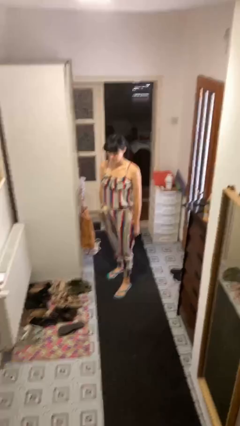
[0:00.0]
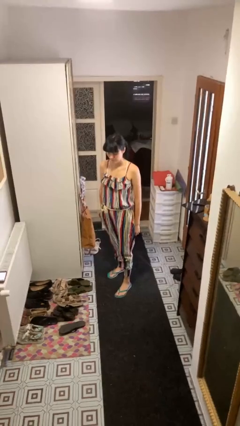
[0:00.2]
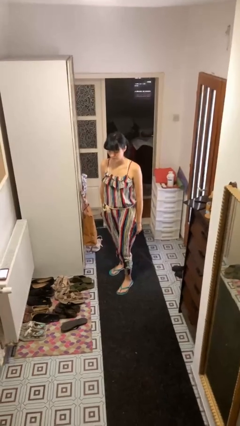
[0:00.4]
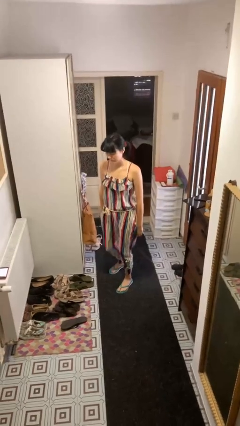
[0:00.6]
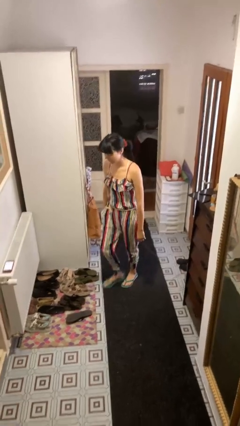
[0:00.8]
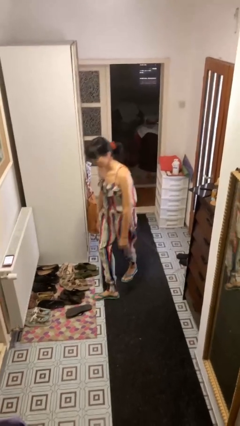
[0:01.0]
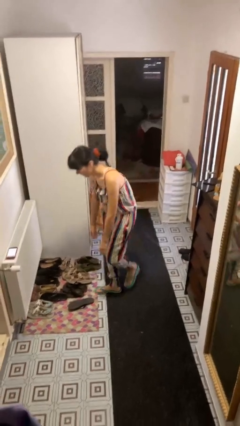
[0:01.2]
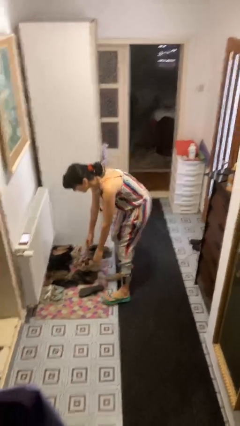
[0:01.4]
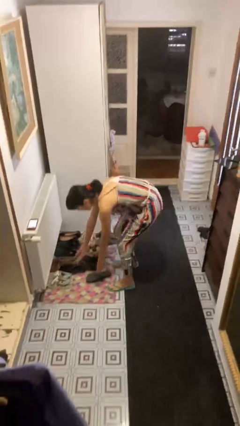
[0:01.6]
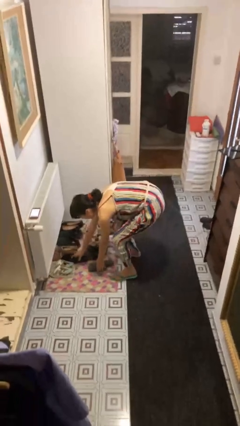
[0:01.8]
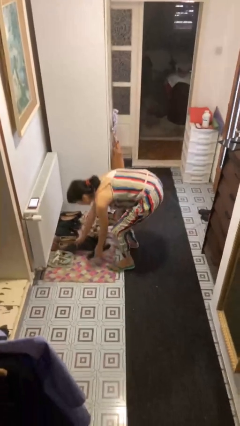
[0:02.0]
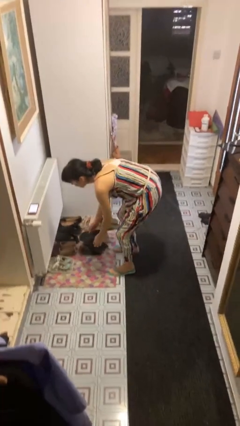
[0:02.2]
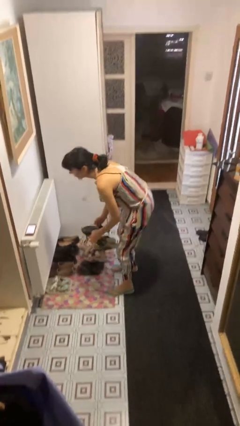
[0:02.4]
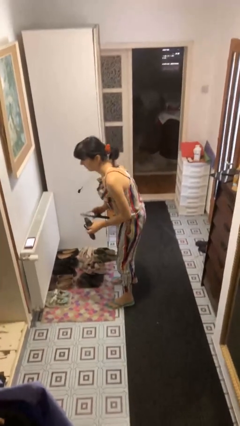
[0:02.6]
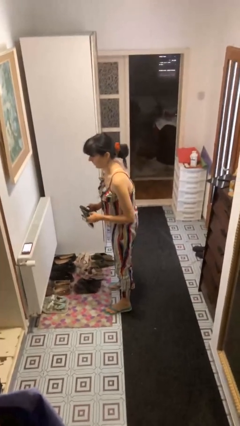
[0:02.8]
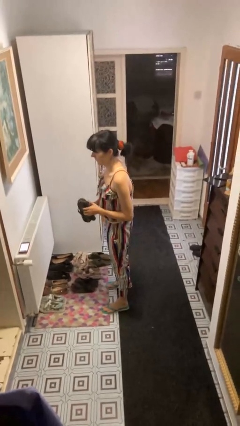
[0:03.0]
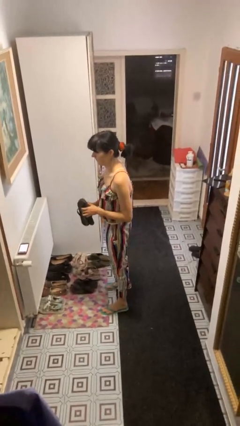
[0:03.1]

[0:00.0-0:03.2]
person picks up object from floor

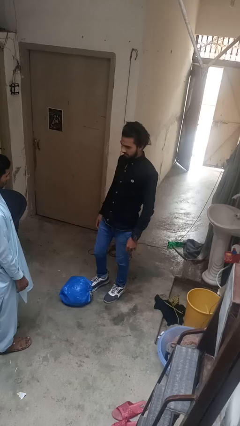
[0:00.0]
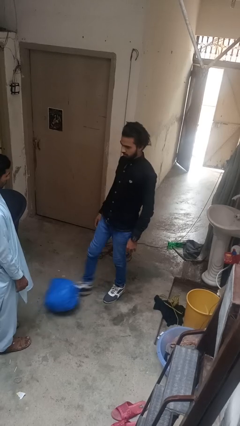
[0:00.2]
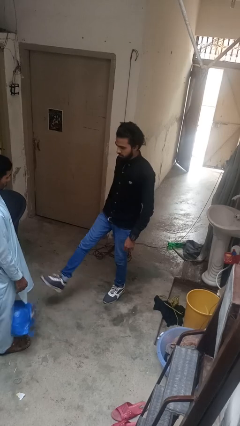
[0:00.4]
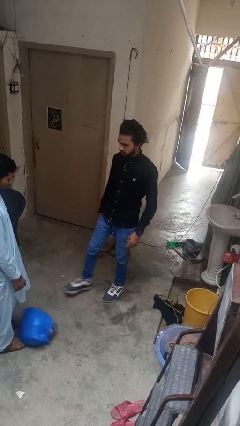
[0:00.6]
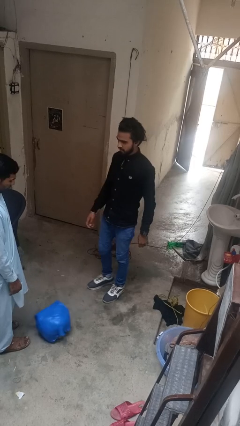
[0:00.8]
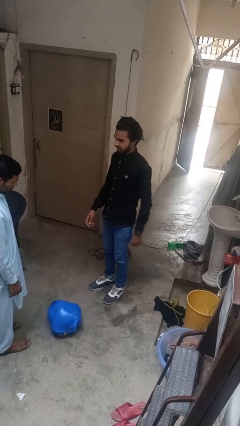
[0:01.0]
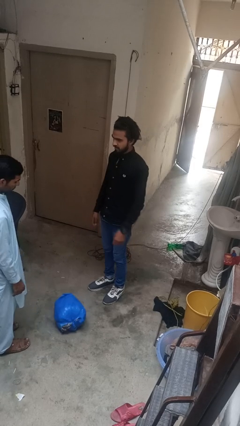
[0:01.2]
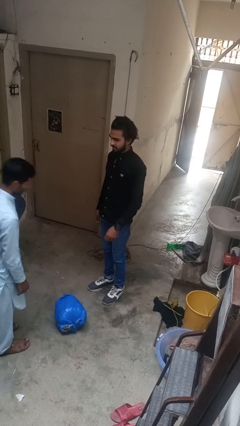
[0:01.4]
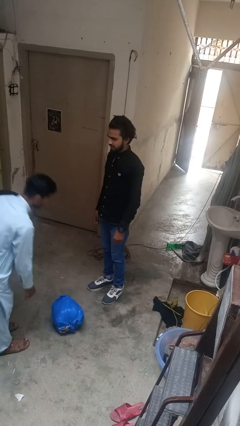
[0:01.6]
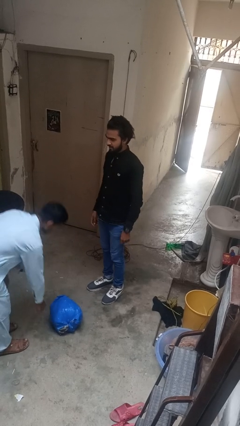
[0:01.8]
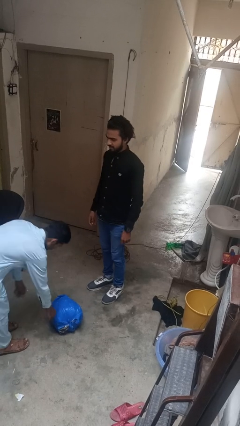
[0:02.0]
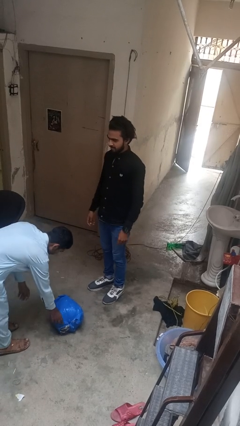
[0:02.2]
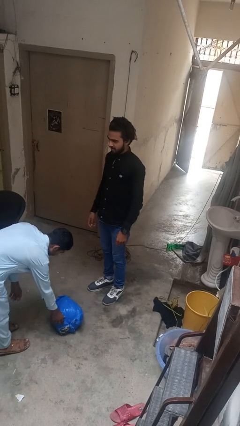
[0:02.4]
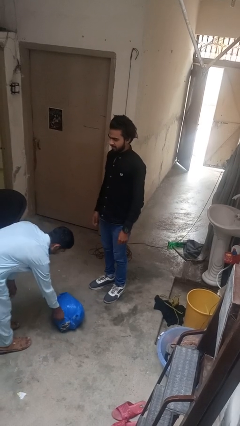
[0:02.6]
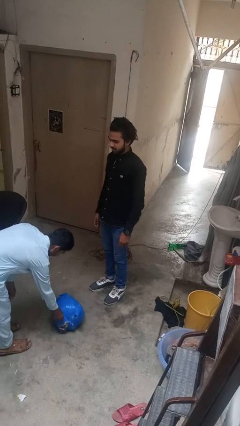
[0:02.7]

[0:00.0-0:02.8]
person kicks object to person

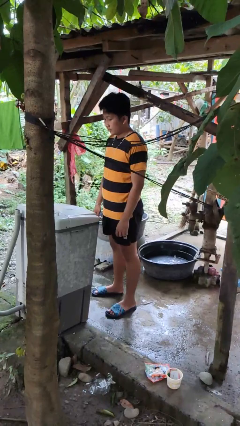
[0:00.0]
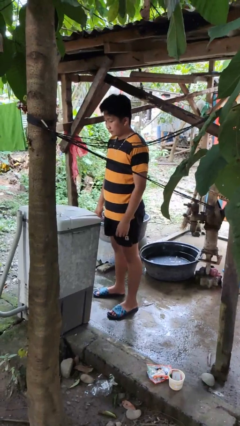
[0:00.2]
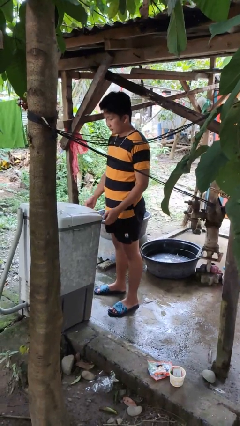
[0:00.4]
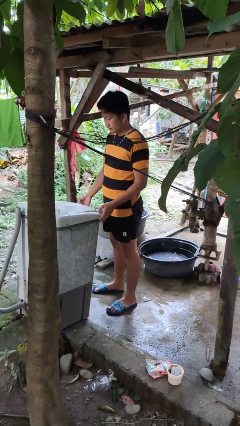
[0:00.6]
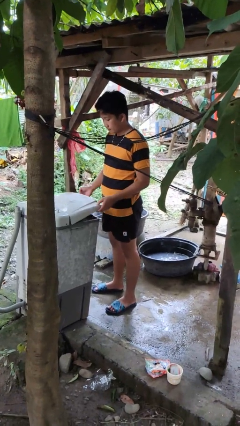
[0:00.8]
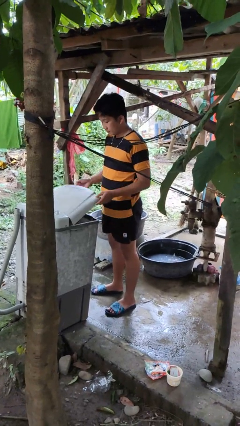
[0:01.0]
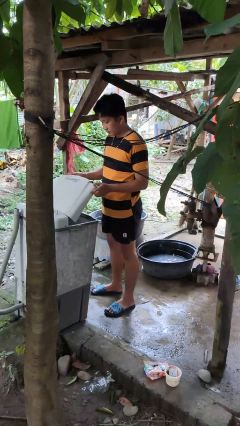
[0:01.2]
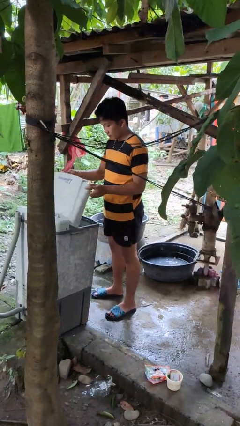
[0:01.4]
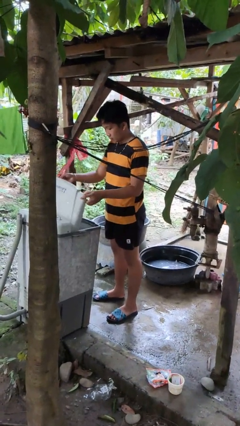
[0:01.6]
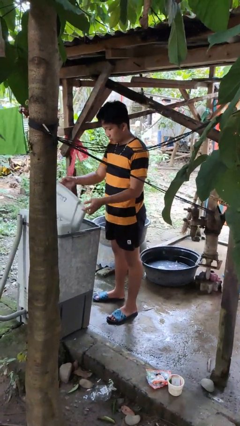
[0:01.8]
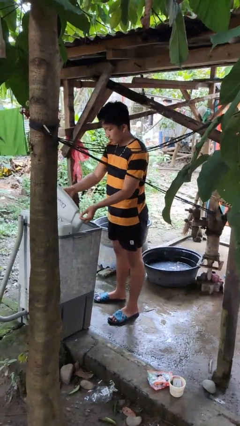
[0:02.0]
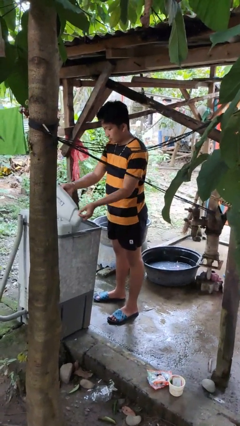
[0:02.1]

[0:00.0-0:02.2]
person opens clothes washer

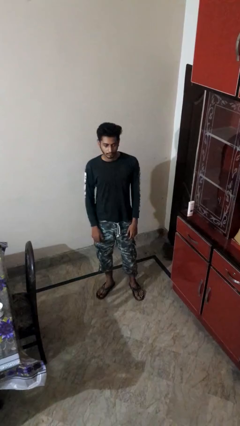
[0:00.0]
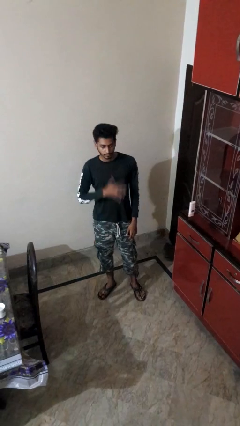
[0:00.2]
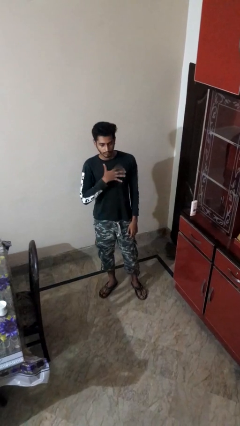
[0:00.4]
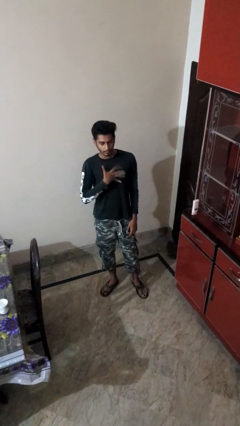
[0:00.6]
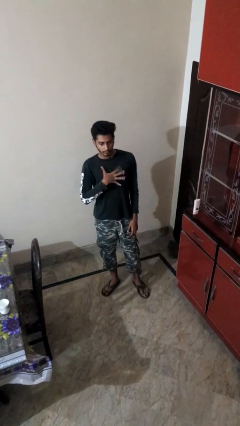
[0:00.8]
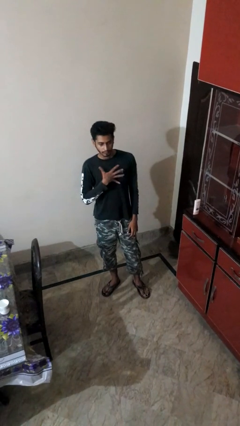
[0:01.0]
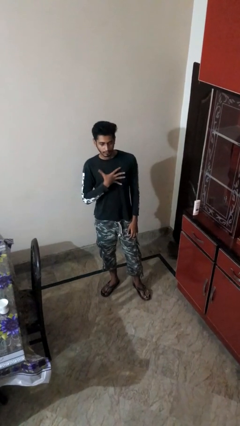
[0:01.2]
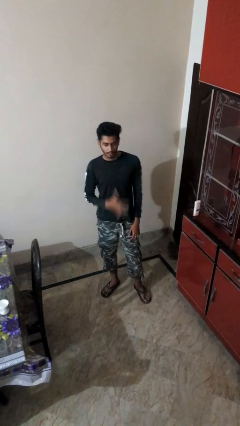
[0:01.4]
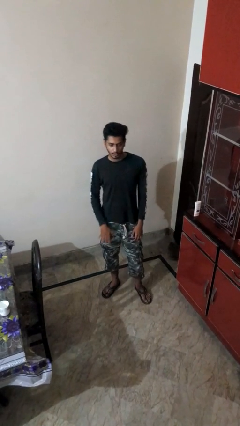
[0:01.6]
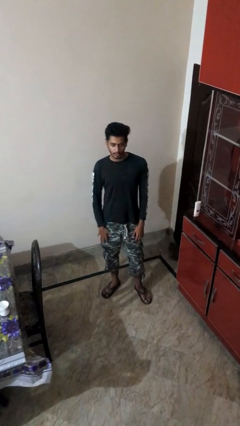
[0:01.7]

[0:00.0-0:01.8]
person drums on chest

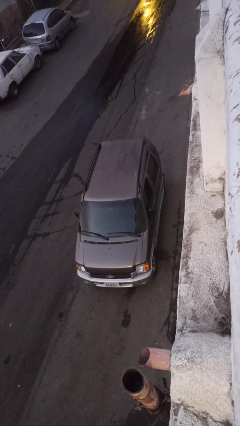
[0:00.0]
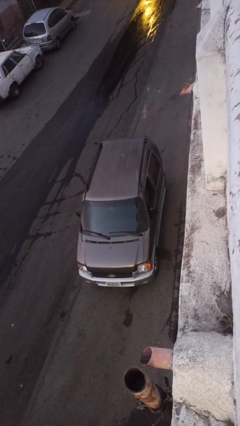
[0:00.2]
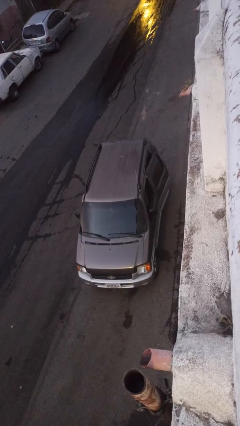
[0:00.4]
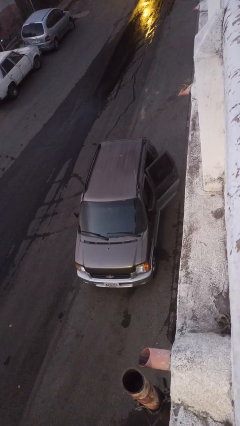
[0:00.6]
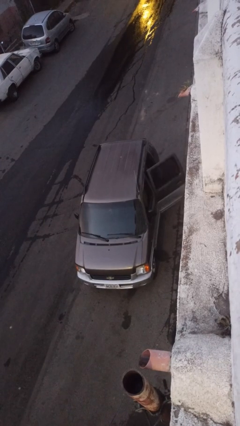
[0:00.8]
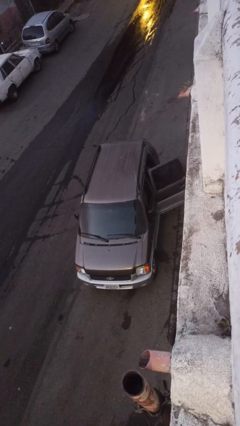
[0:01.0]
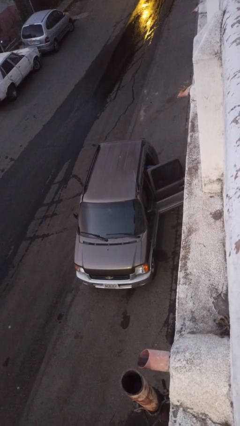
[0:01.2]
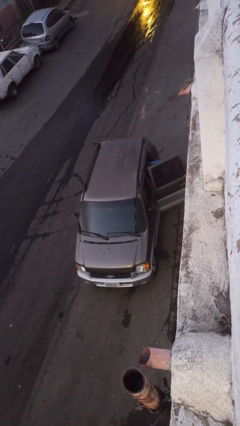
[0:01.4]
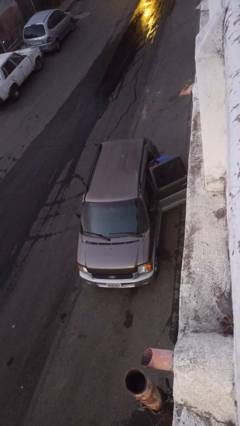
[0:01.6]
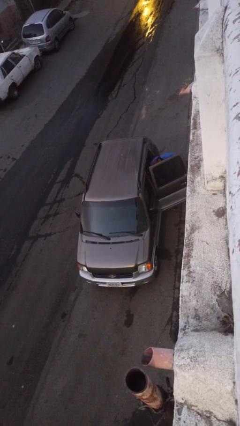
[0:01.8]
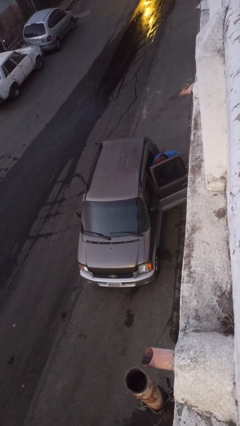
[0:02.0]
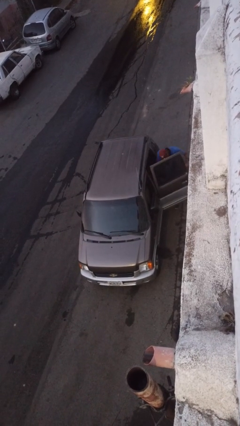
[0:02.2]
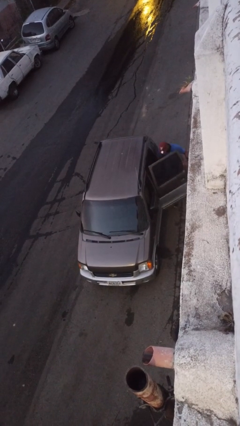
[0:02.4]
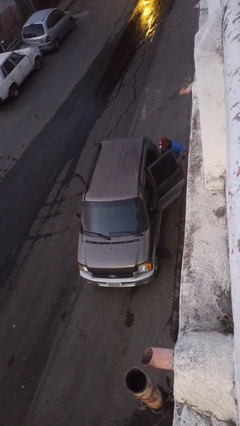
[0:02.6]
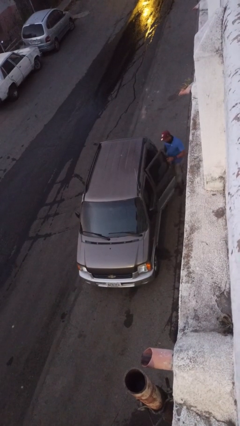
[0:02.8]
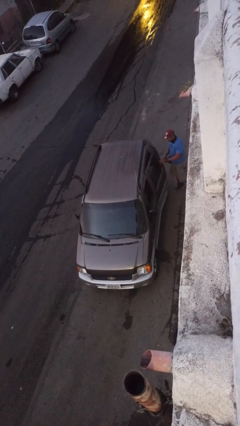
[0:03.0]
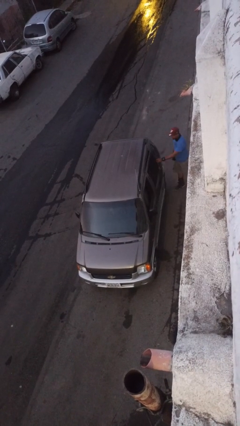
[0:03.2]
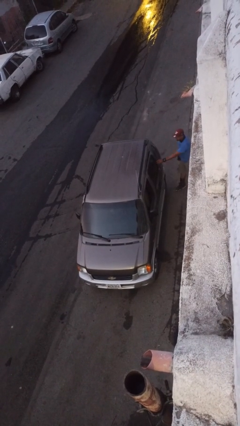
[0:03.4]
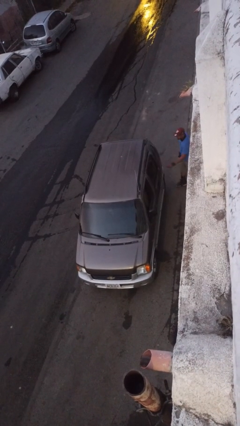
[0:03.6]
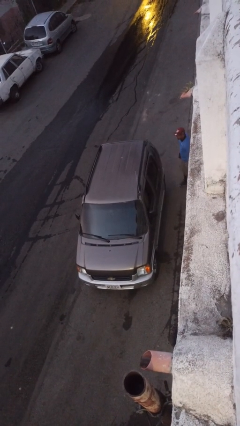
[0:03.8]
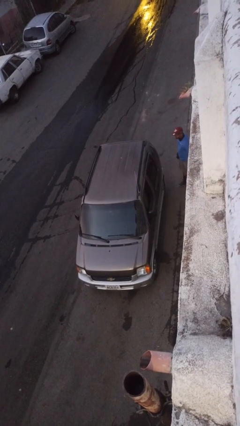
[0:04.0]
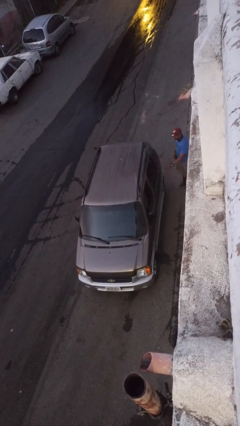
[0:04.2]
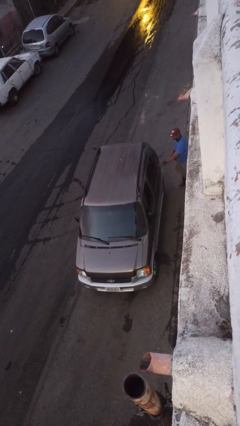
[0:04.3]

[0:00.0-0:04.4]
car drops off person

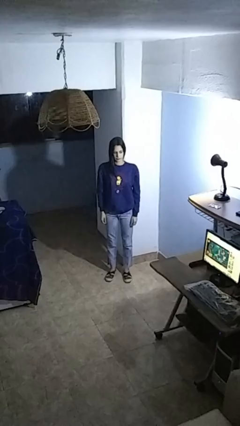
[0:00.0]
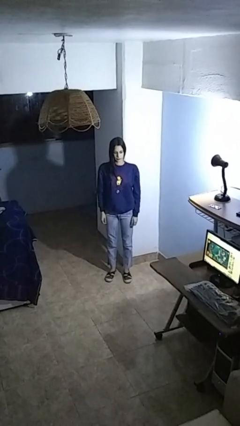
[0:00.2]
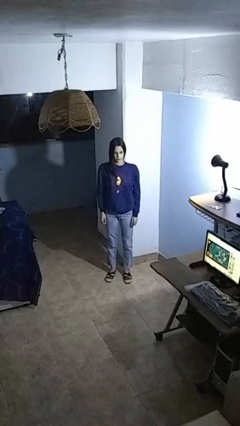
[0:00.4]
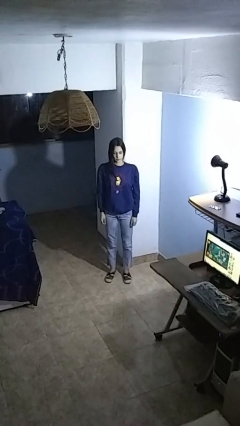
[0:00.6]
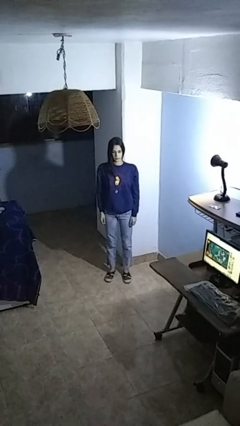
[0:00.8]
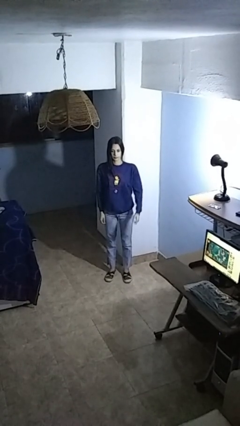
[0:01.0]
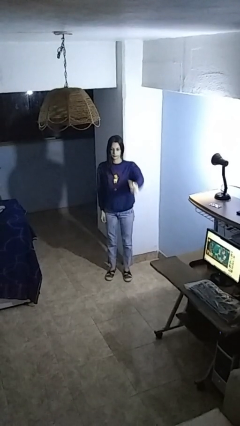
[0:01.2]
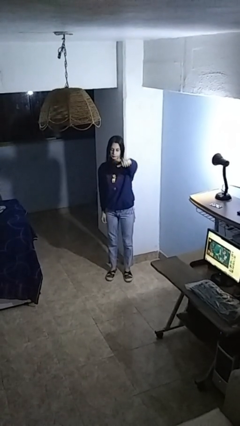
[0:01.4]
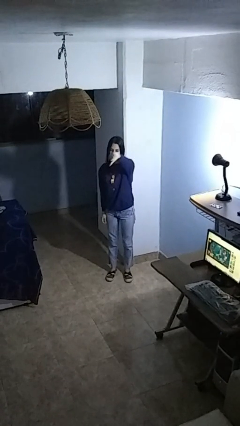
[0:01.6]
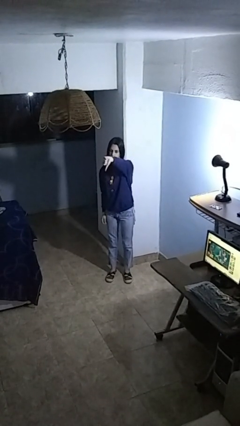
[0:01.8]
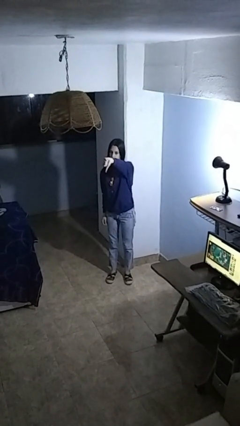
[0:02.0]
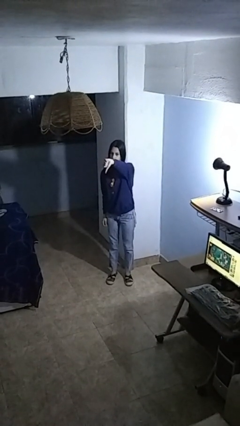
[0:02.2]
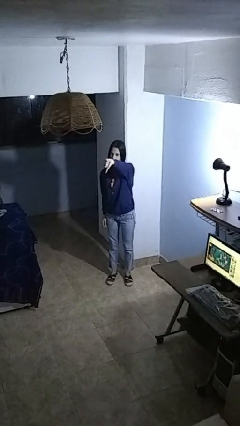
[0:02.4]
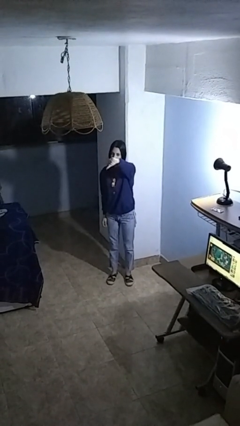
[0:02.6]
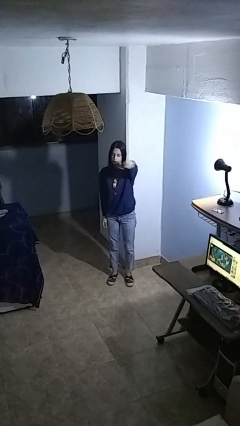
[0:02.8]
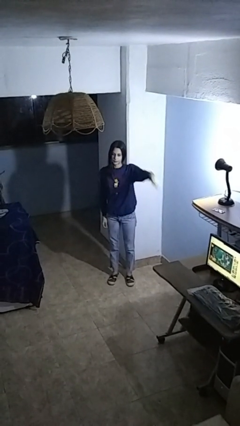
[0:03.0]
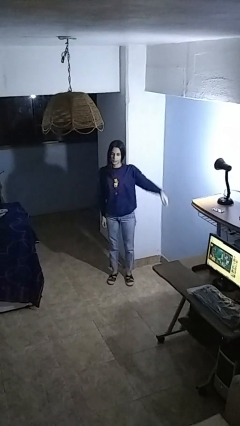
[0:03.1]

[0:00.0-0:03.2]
person gestures thumbs down
